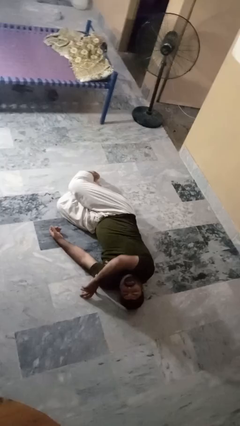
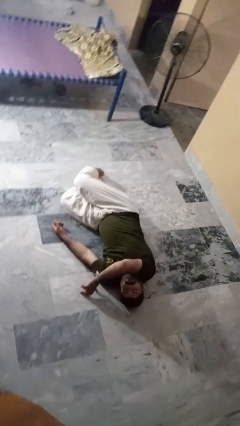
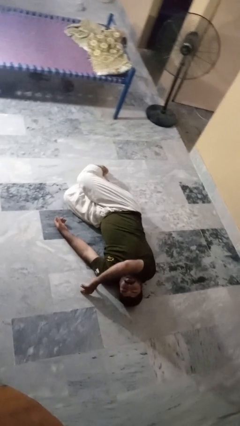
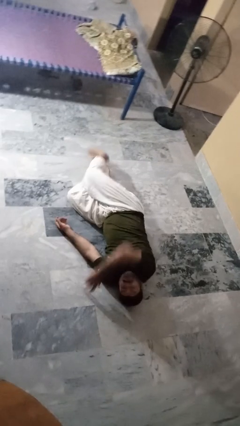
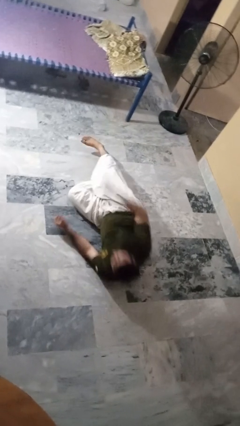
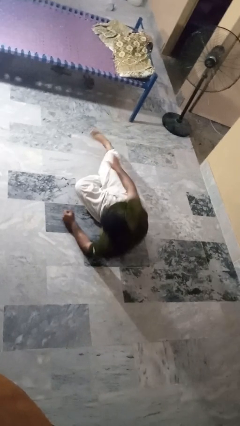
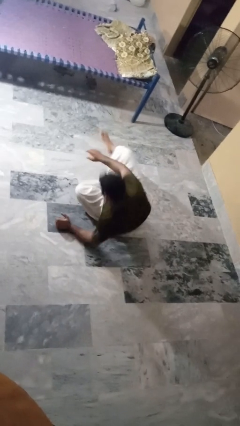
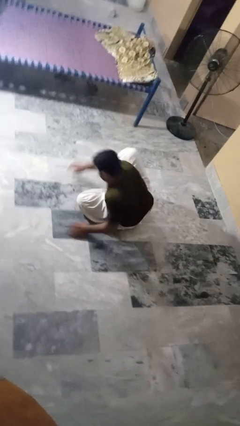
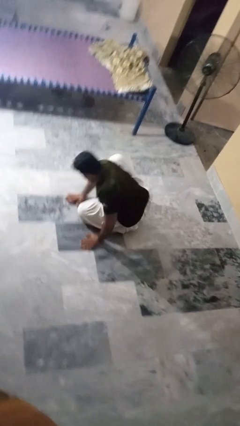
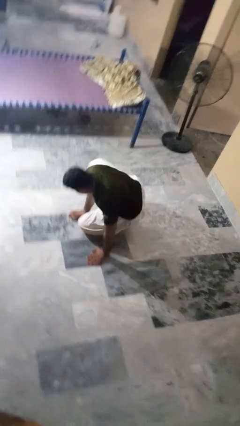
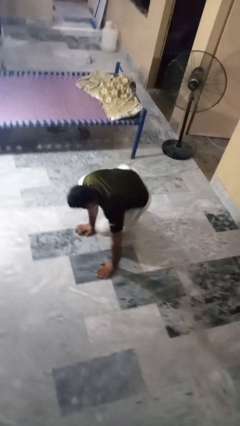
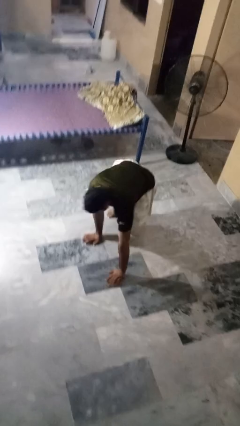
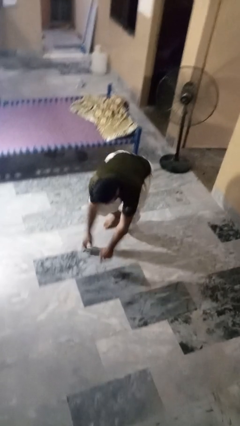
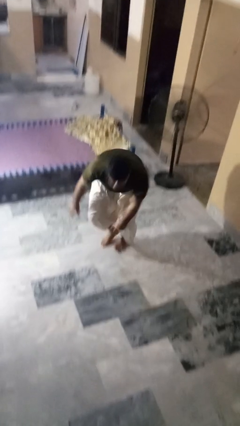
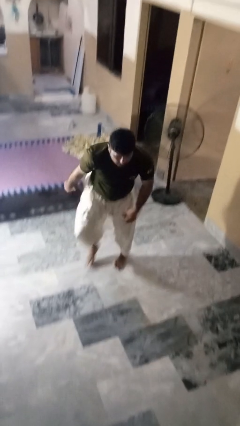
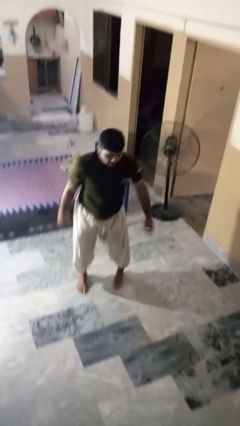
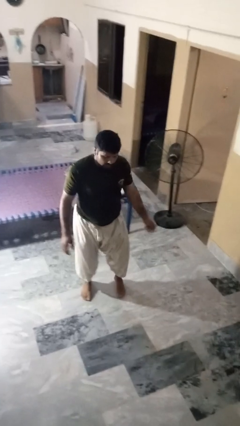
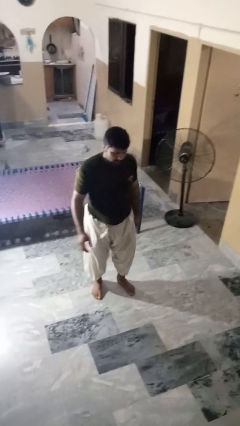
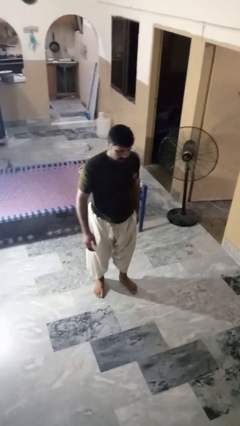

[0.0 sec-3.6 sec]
person stands up from floor

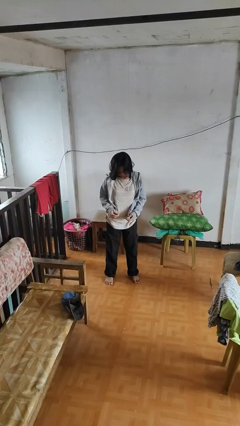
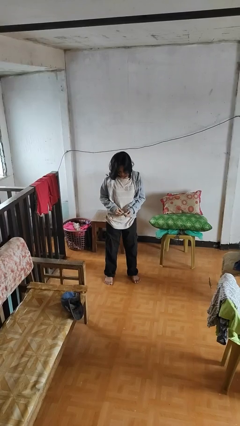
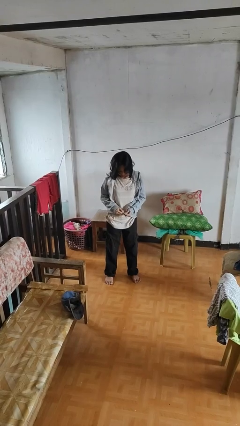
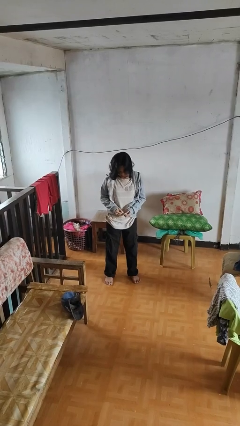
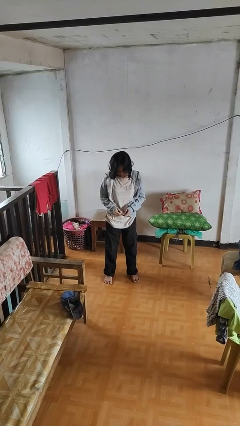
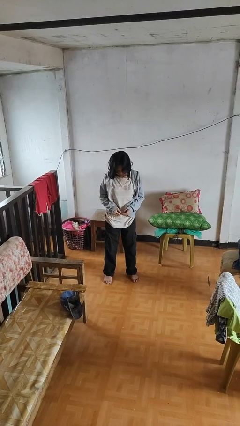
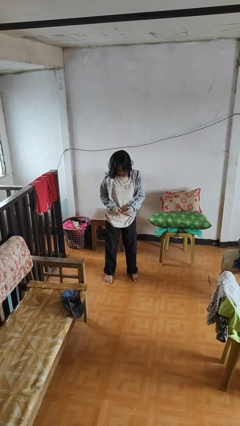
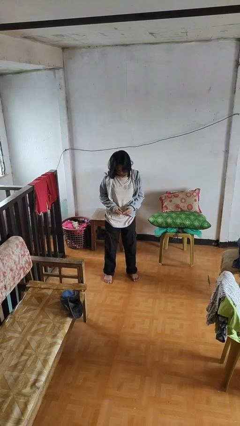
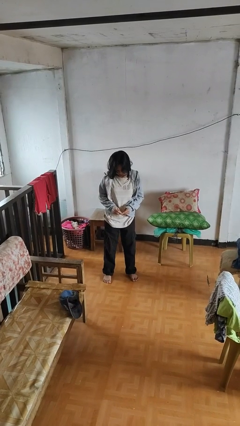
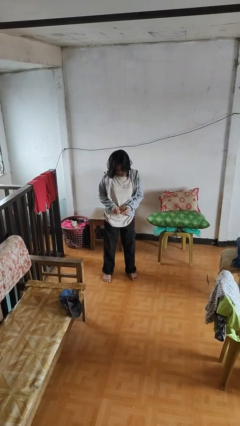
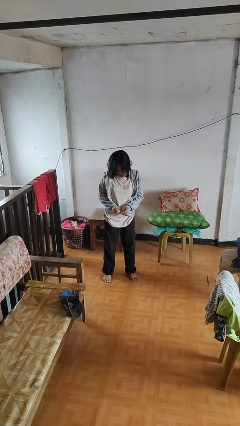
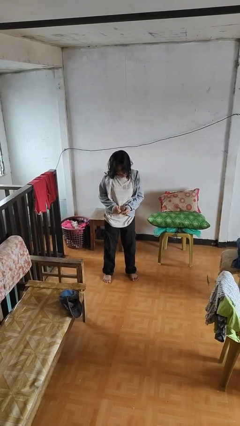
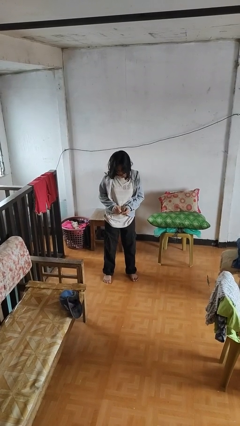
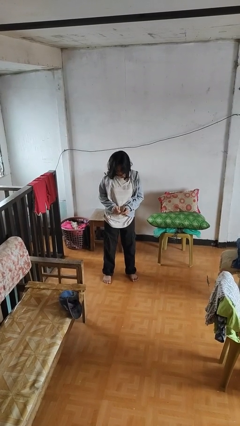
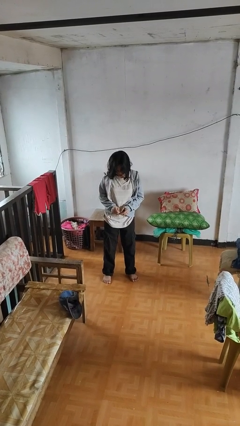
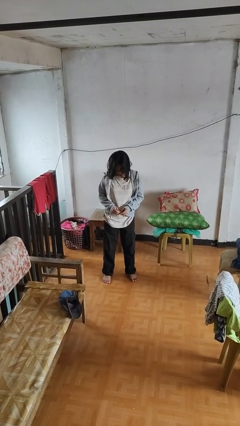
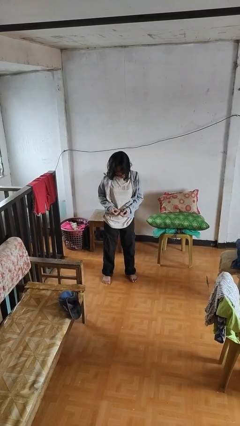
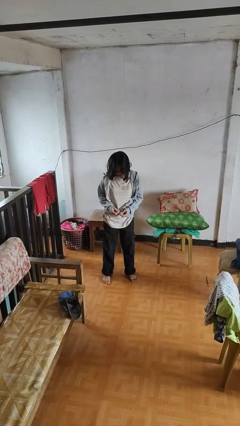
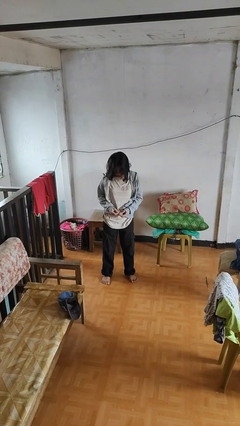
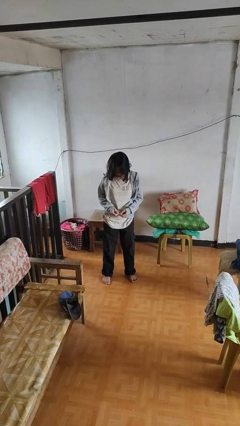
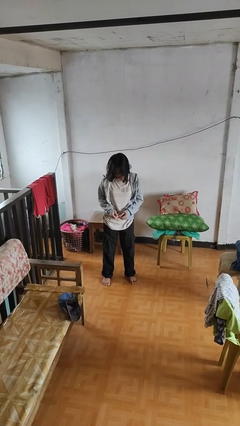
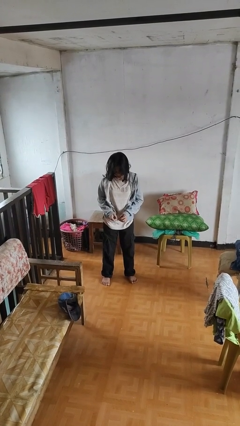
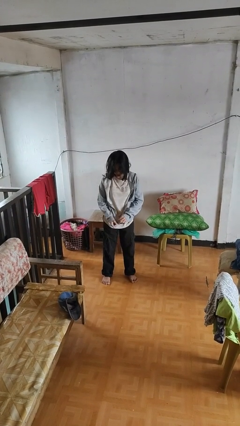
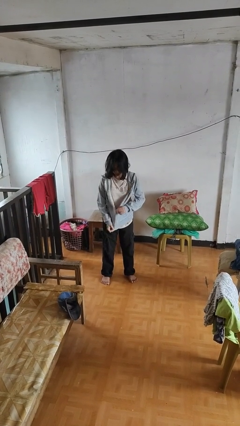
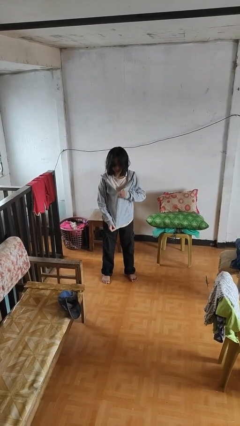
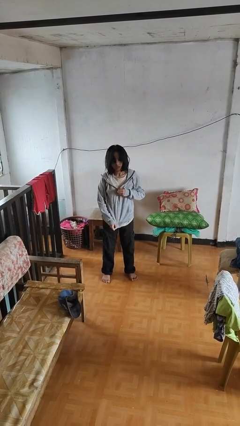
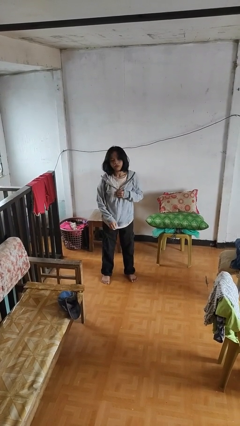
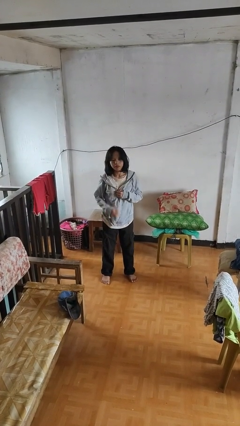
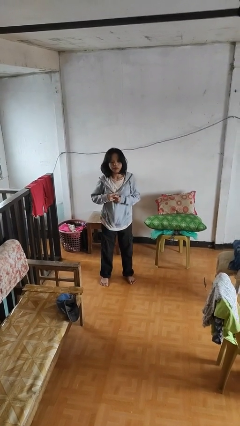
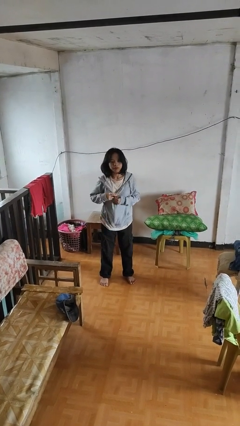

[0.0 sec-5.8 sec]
person zips up jacket

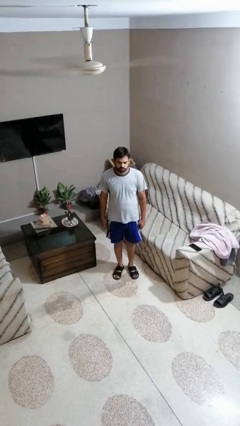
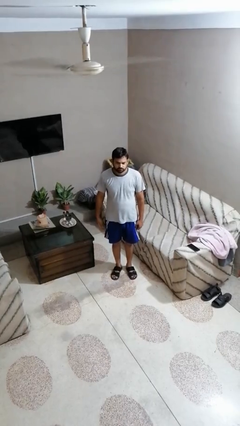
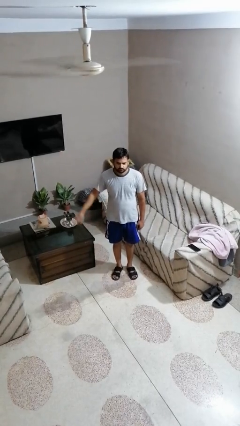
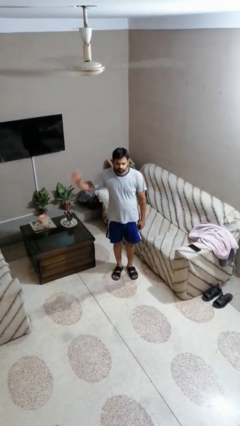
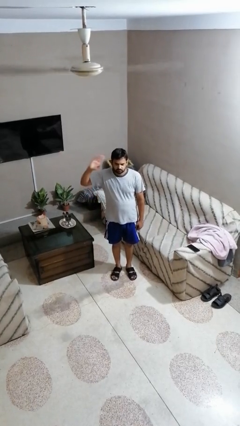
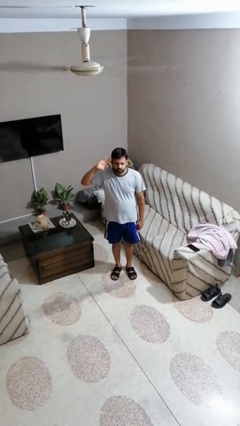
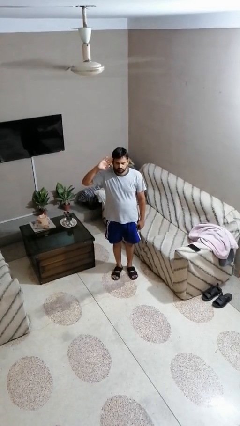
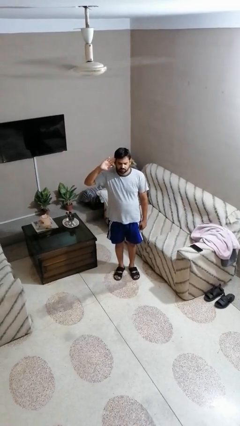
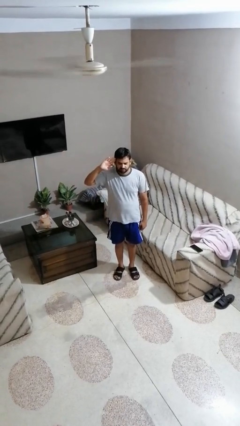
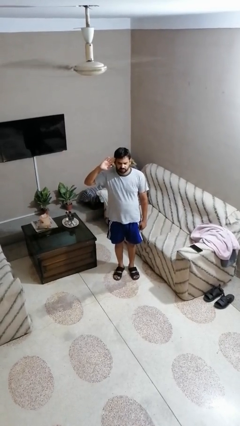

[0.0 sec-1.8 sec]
person salutes

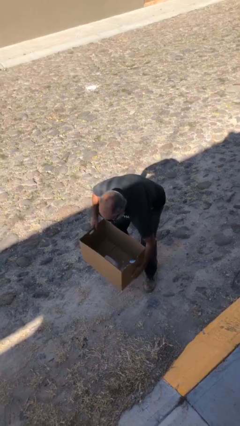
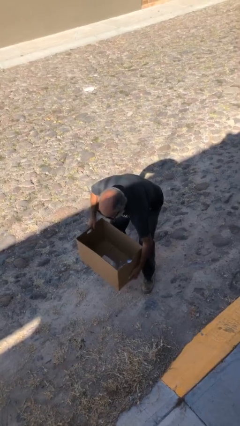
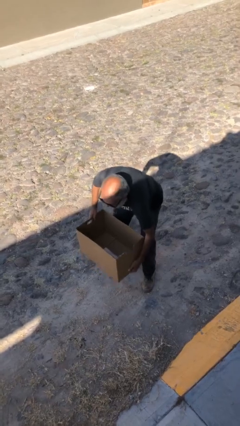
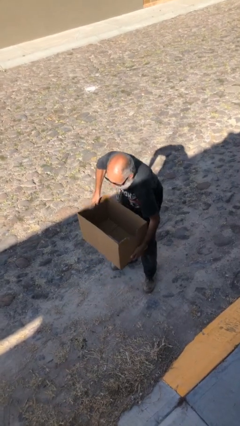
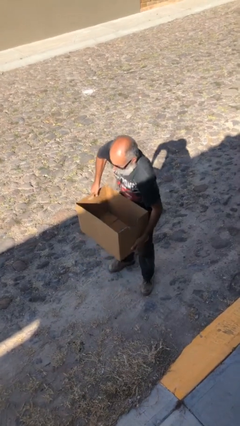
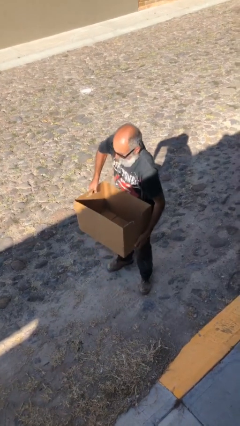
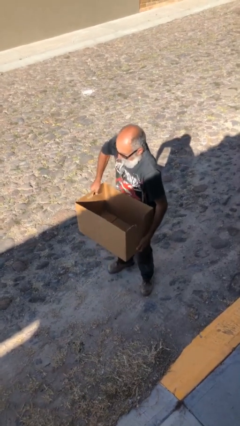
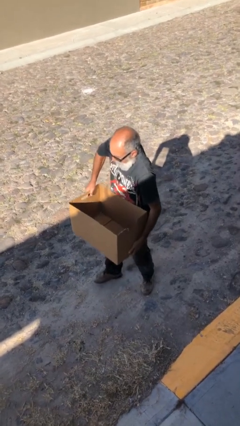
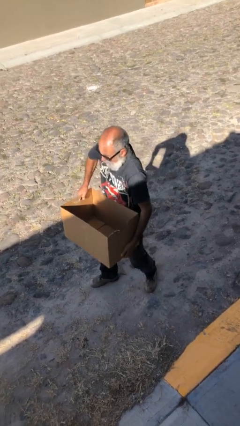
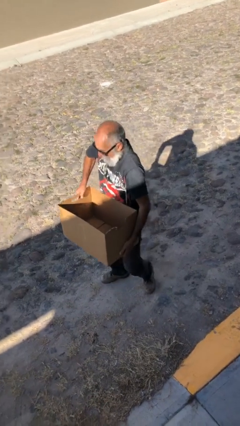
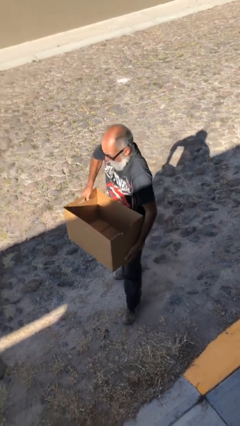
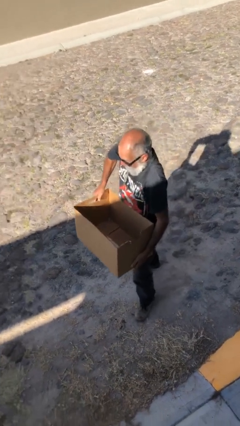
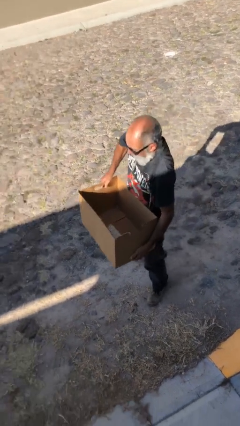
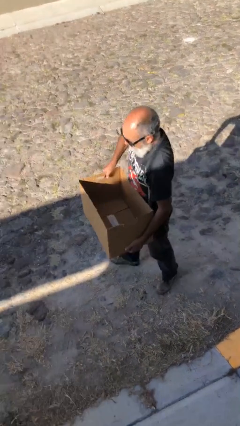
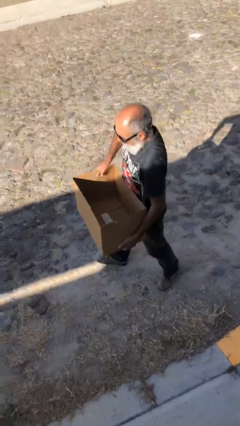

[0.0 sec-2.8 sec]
person carries heavy object

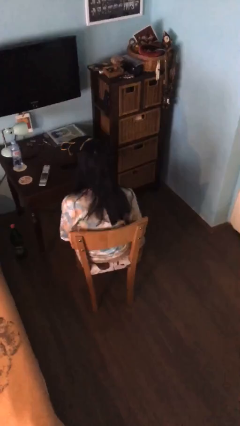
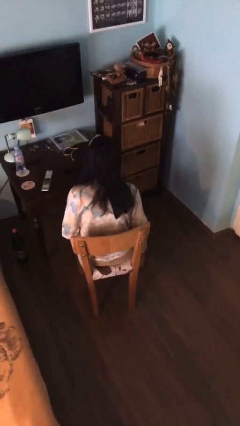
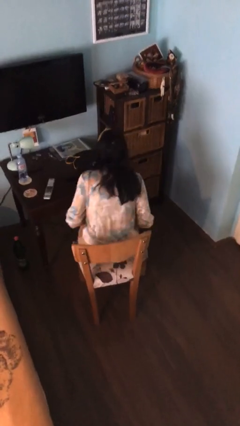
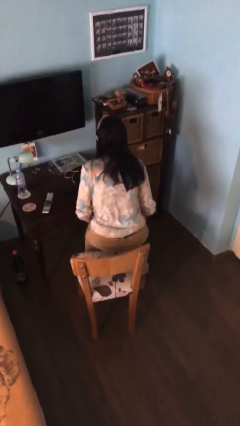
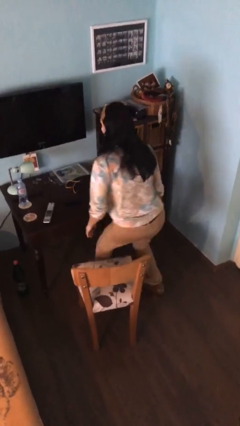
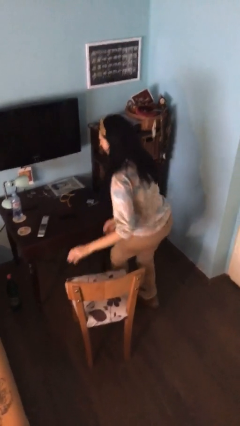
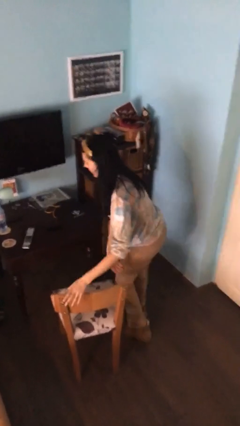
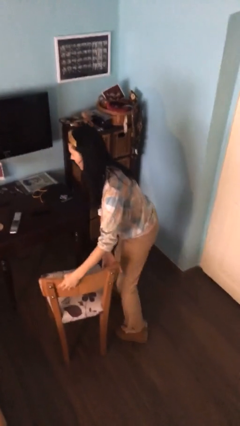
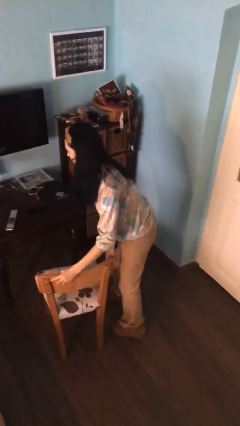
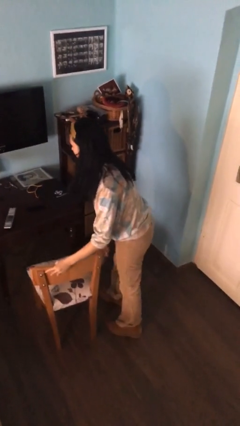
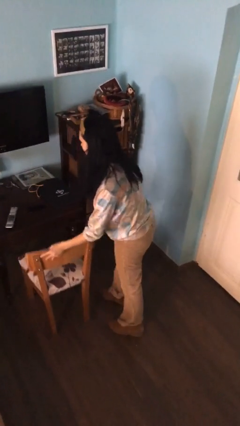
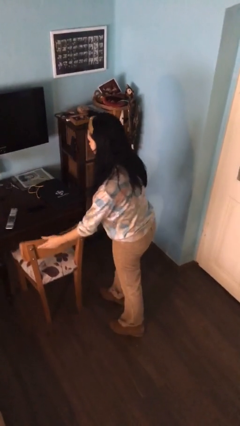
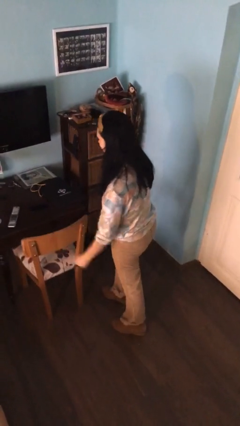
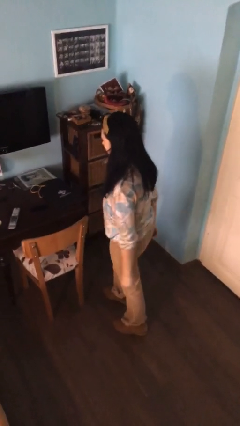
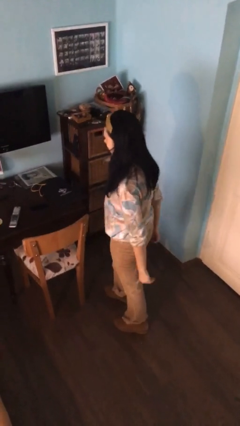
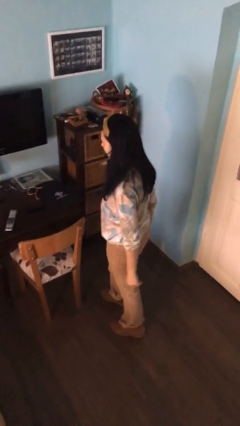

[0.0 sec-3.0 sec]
person stands up

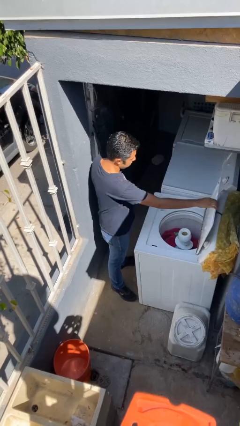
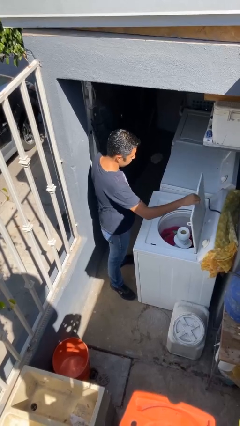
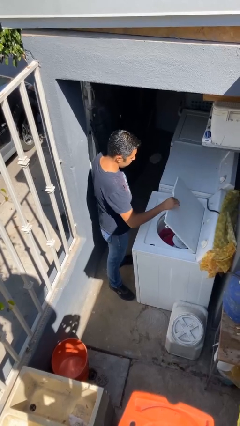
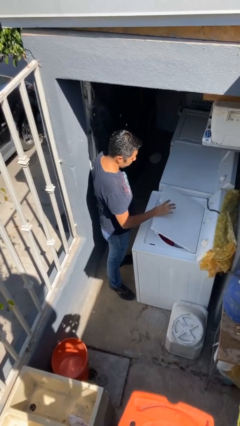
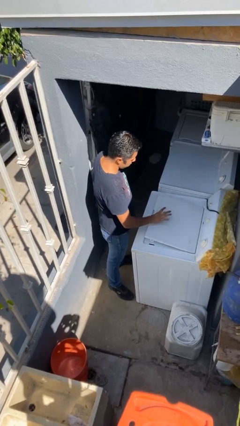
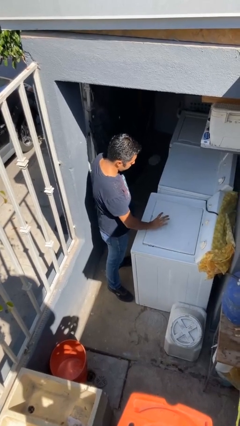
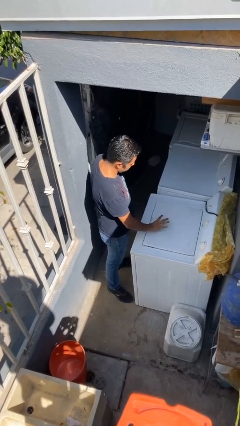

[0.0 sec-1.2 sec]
person closes clothes washer
